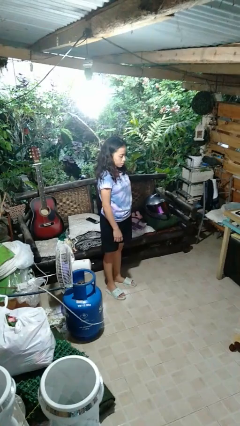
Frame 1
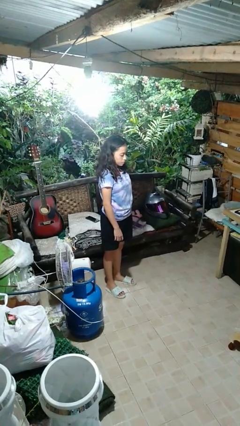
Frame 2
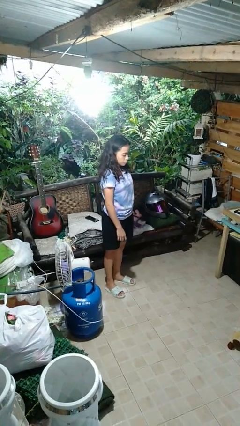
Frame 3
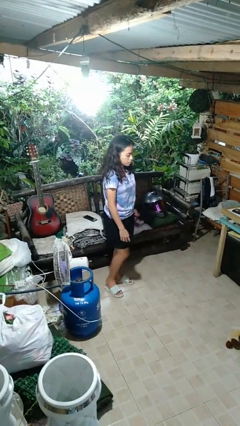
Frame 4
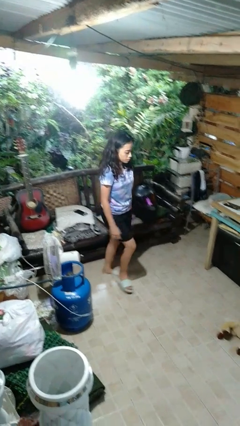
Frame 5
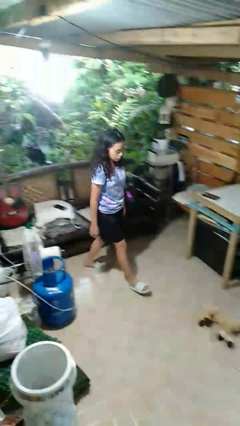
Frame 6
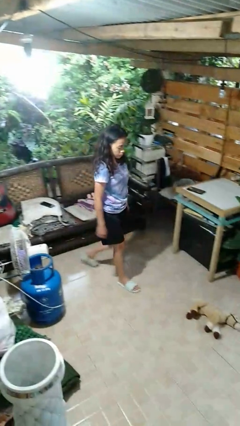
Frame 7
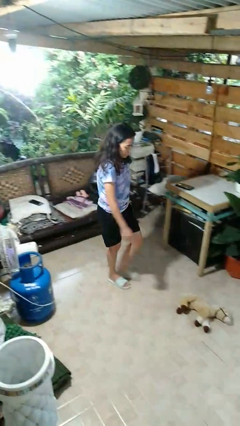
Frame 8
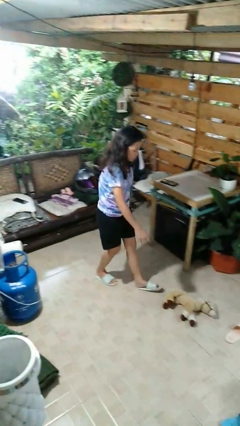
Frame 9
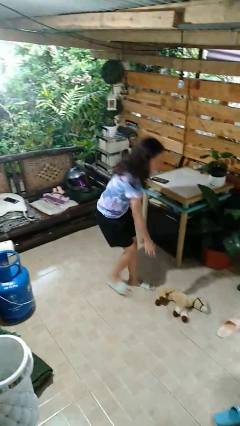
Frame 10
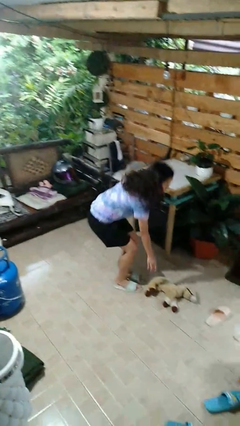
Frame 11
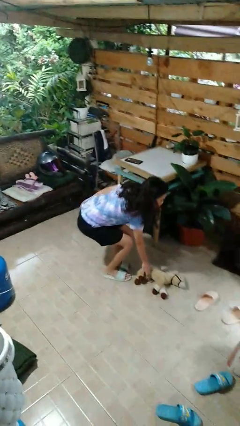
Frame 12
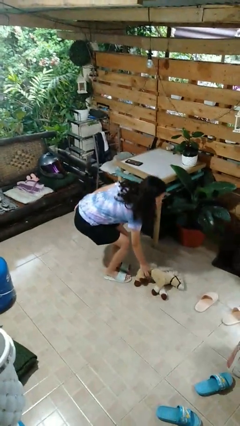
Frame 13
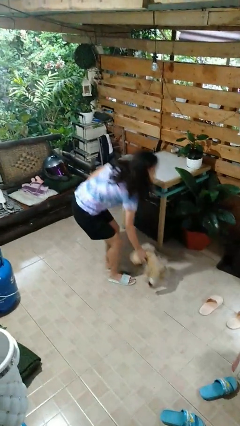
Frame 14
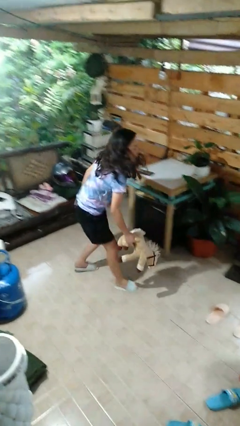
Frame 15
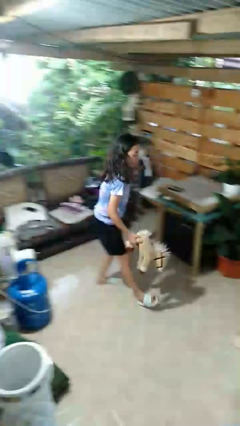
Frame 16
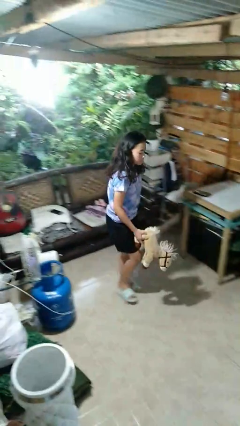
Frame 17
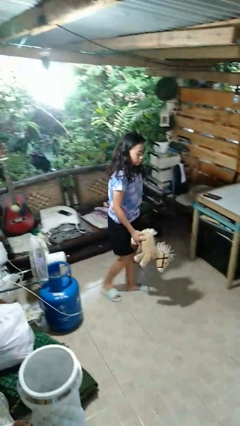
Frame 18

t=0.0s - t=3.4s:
person picks up object from floor

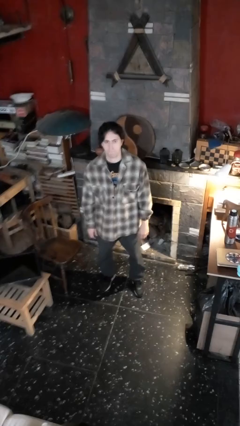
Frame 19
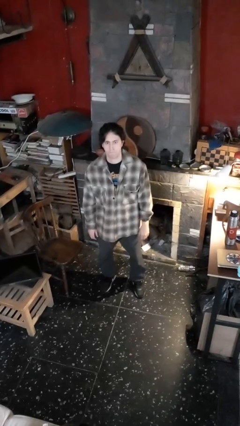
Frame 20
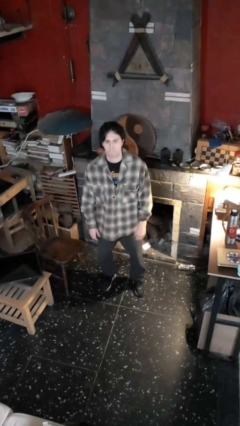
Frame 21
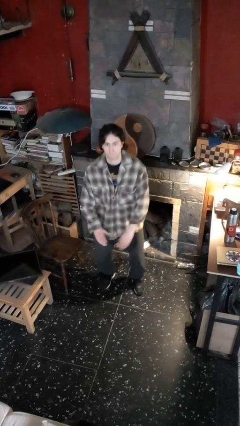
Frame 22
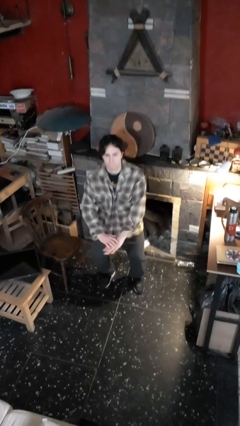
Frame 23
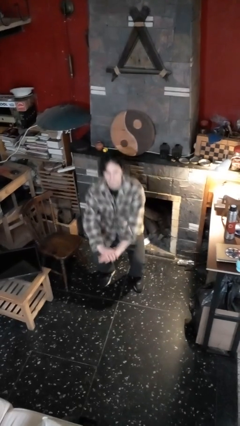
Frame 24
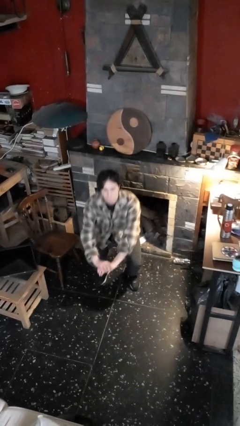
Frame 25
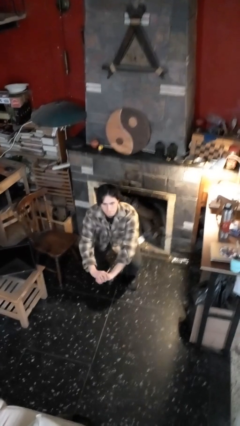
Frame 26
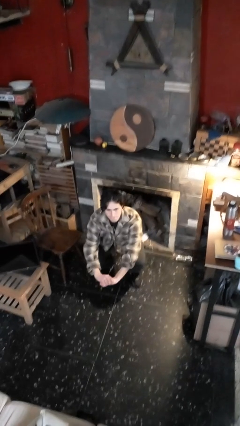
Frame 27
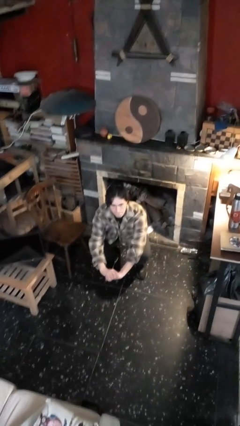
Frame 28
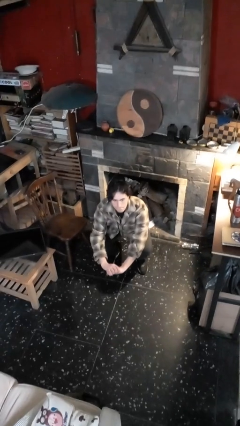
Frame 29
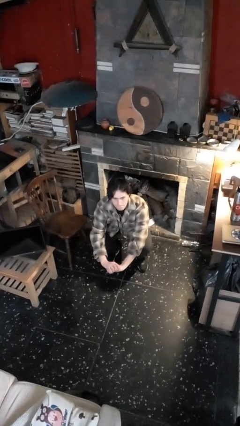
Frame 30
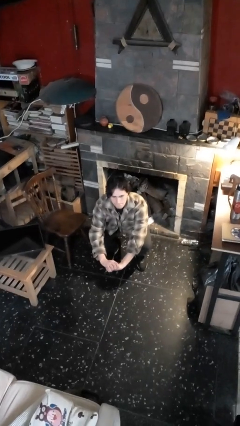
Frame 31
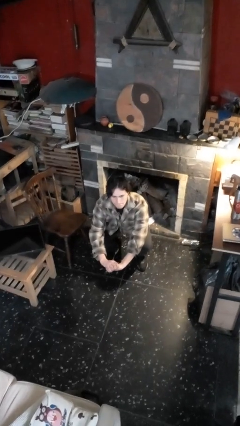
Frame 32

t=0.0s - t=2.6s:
person squats

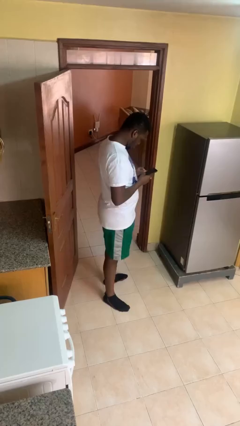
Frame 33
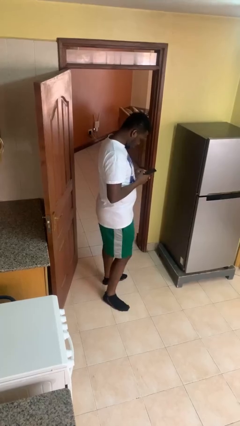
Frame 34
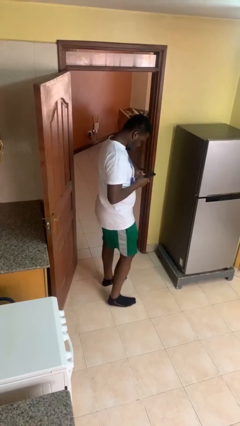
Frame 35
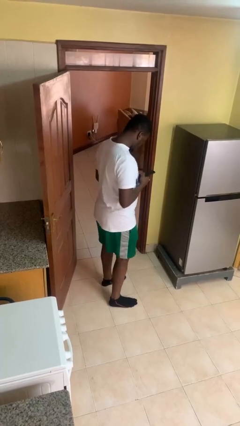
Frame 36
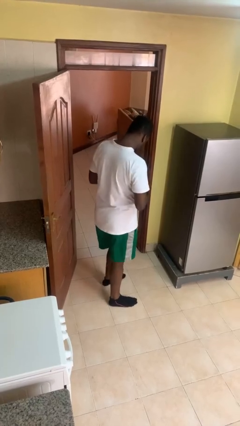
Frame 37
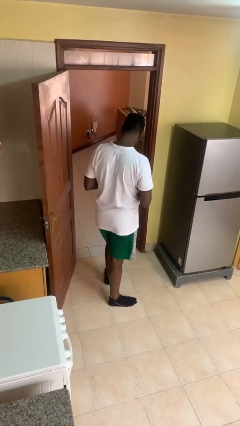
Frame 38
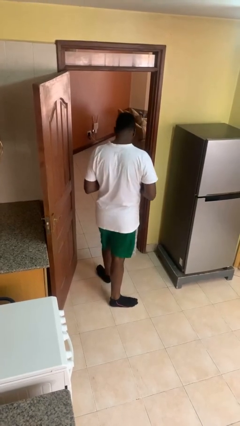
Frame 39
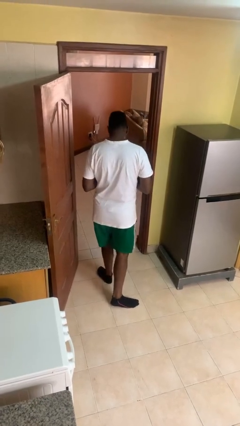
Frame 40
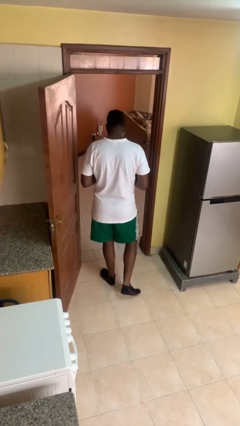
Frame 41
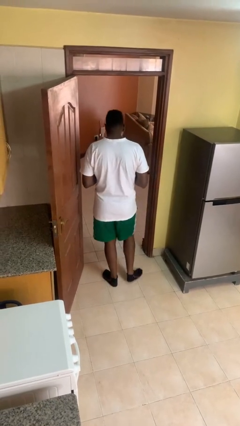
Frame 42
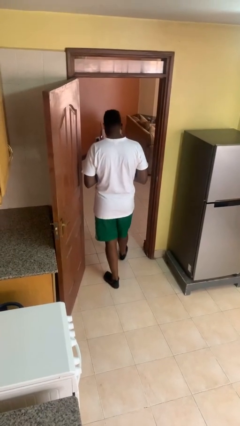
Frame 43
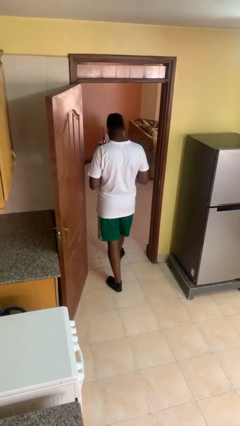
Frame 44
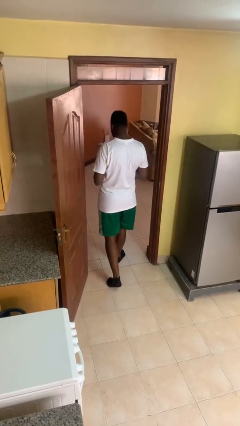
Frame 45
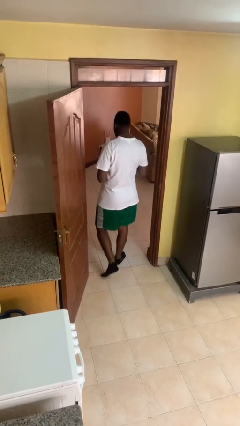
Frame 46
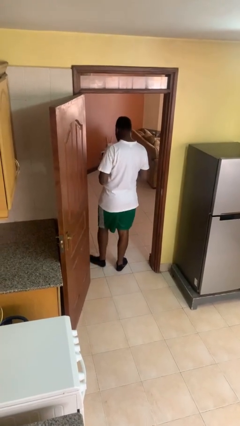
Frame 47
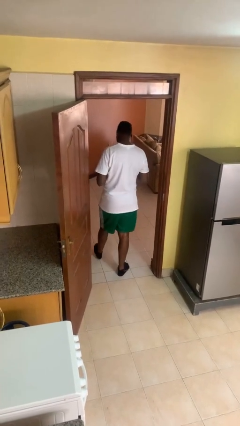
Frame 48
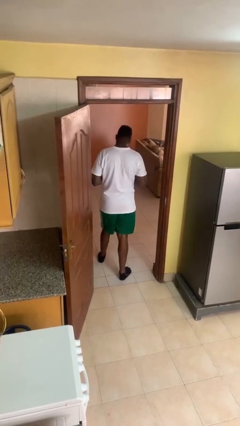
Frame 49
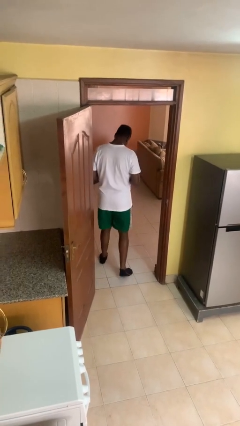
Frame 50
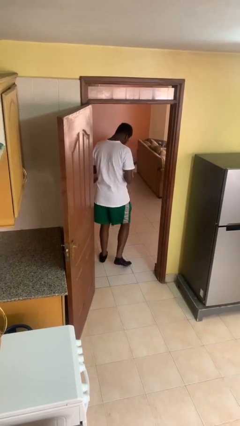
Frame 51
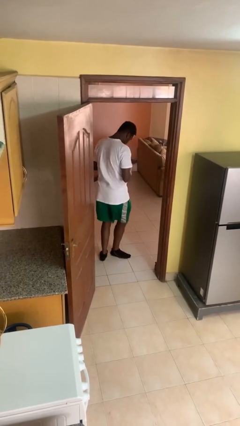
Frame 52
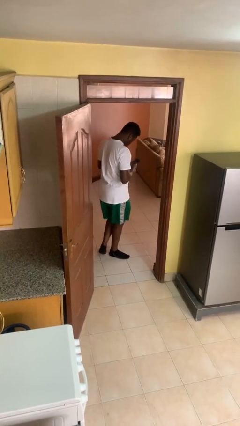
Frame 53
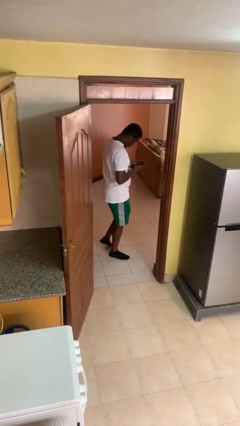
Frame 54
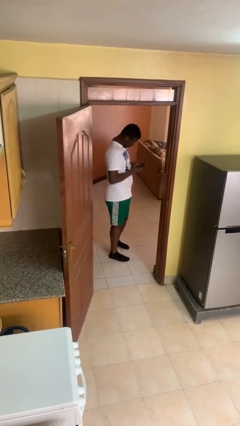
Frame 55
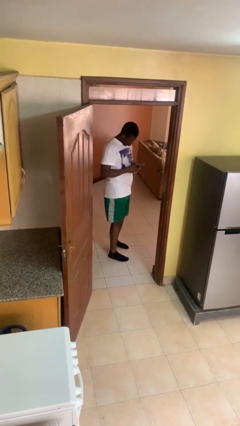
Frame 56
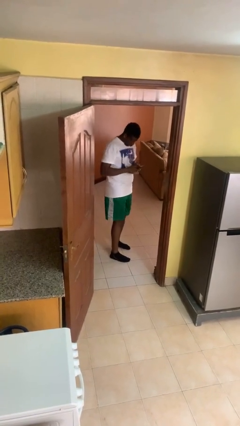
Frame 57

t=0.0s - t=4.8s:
person exits scene through structure

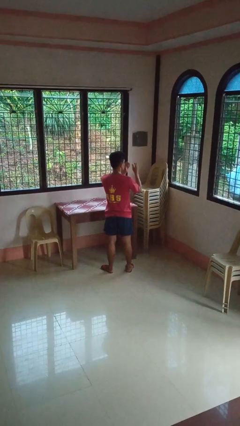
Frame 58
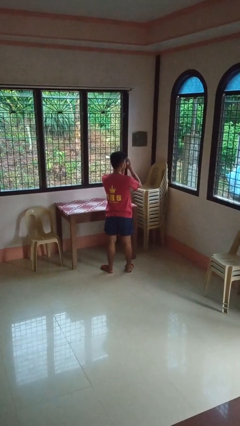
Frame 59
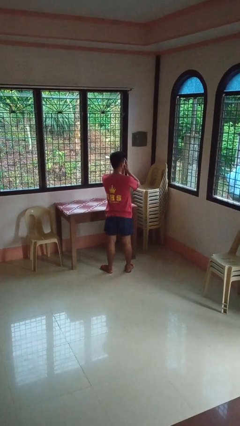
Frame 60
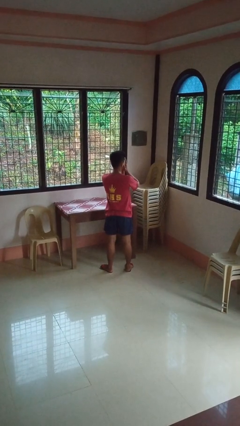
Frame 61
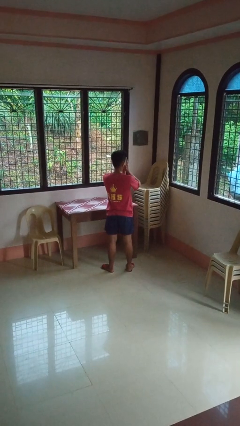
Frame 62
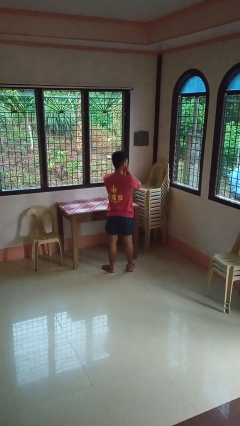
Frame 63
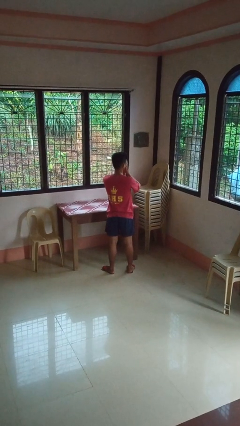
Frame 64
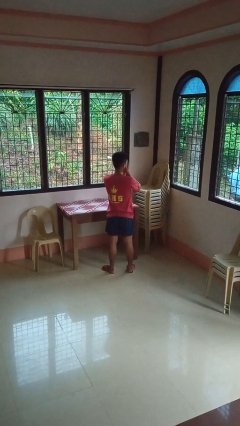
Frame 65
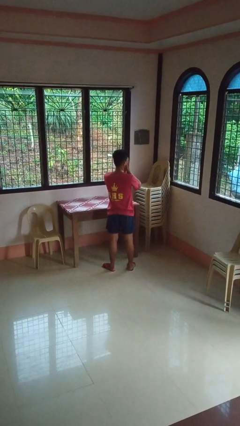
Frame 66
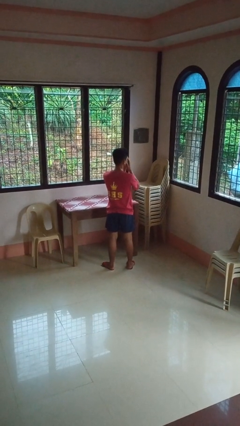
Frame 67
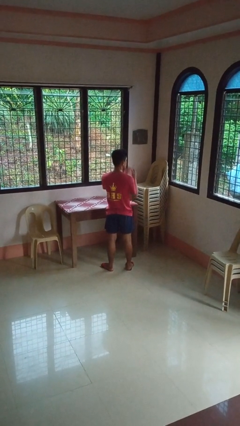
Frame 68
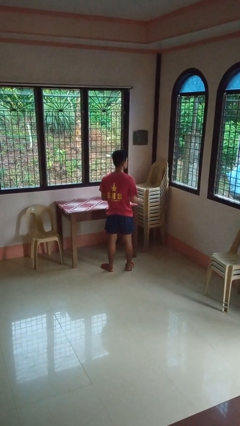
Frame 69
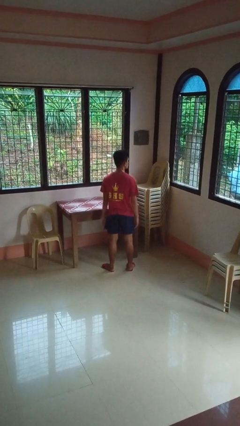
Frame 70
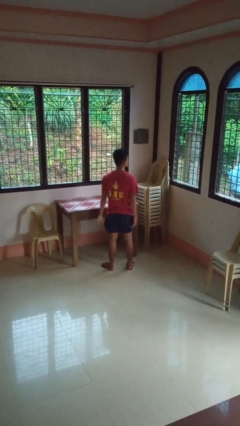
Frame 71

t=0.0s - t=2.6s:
person covers face with hands

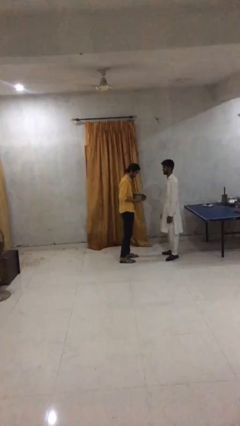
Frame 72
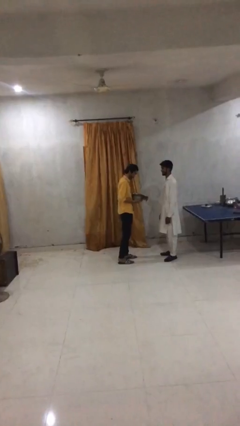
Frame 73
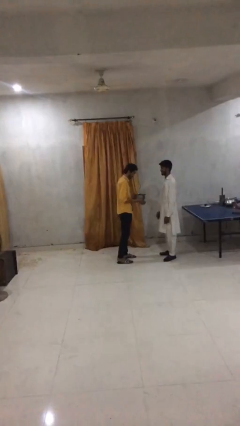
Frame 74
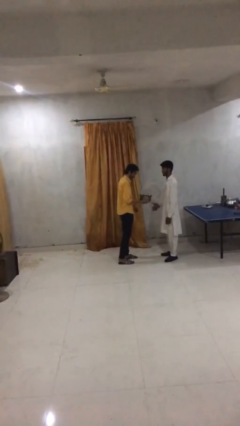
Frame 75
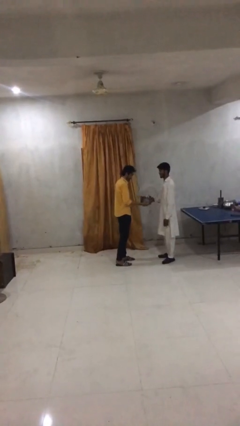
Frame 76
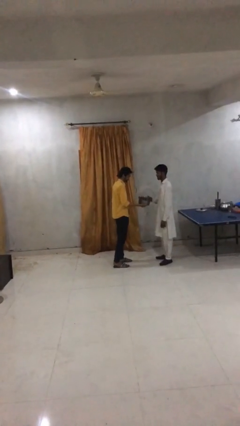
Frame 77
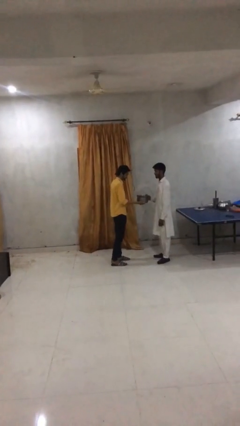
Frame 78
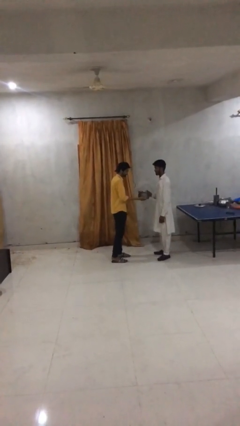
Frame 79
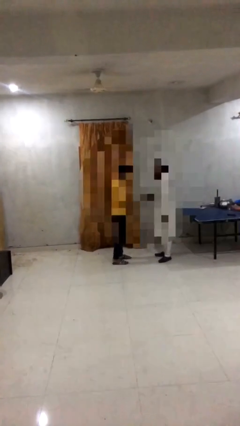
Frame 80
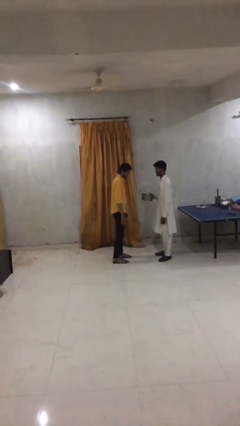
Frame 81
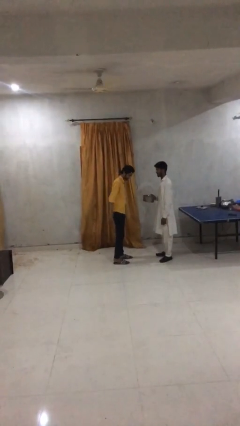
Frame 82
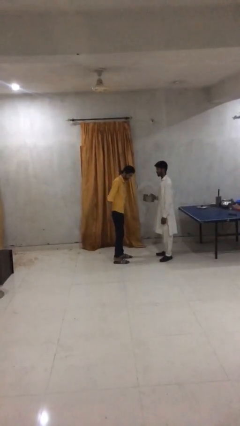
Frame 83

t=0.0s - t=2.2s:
person transfers object to person

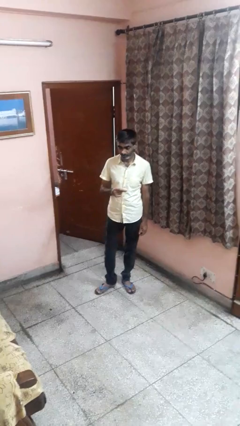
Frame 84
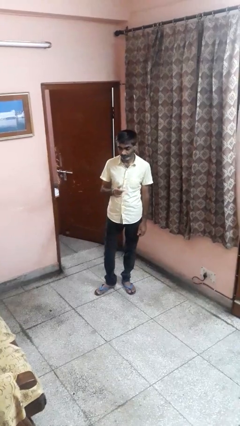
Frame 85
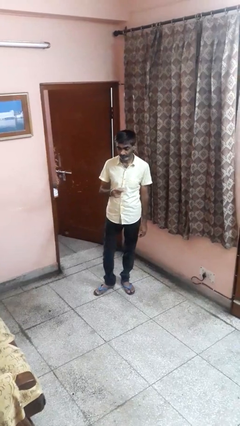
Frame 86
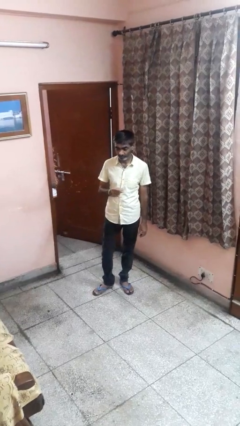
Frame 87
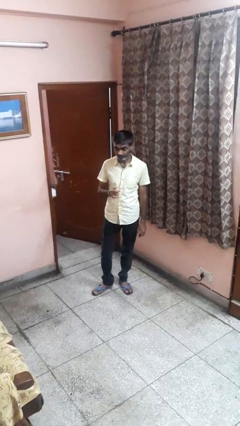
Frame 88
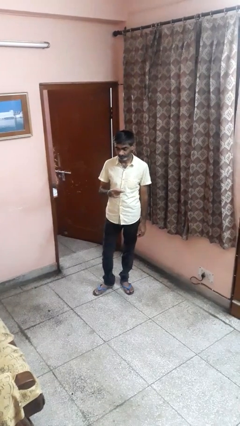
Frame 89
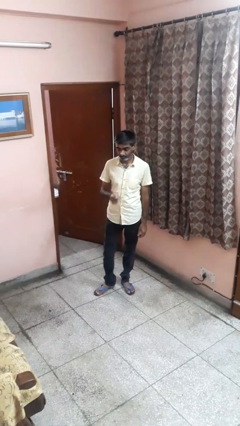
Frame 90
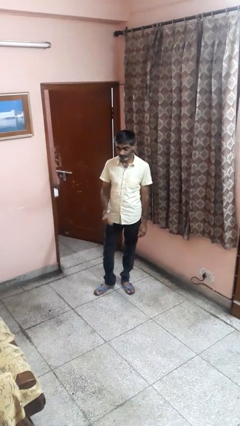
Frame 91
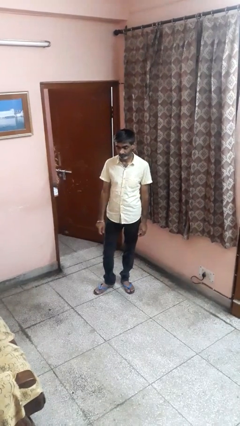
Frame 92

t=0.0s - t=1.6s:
person snaps fingers
